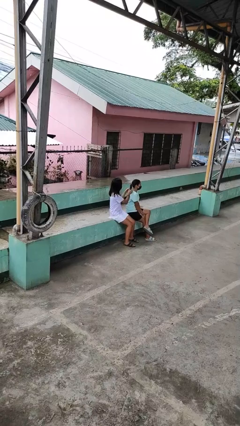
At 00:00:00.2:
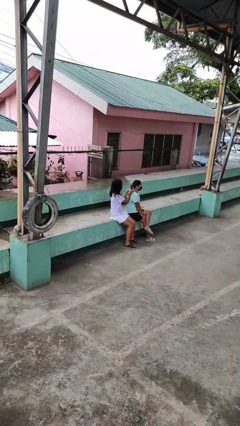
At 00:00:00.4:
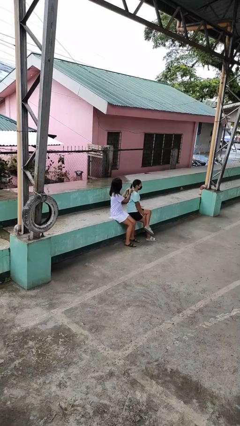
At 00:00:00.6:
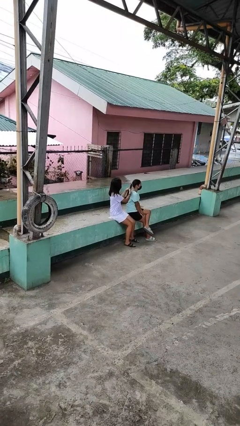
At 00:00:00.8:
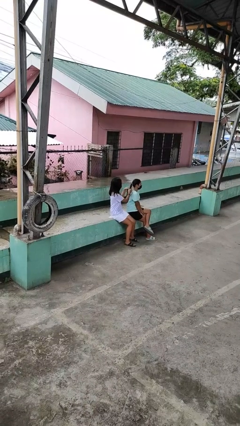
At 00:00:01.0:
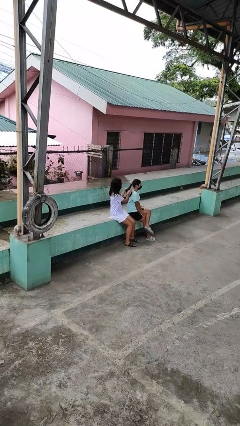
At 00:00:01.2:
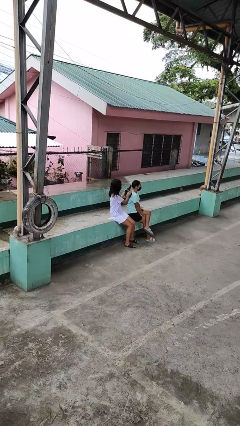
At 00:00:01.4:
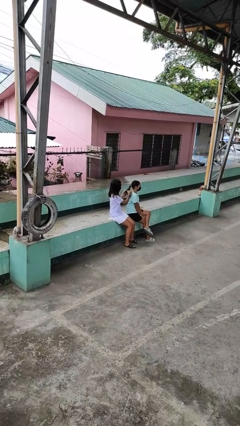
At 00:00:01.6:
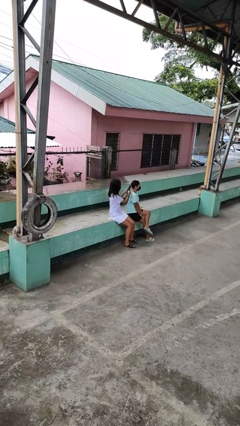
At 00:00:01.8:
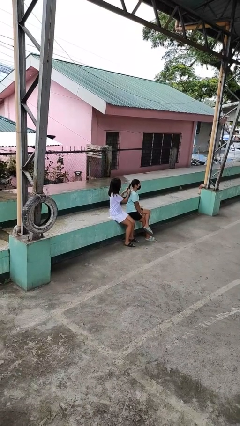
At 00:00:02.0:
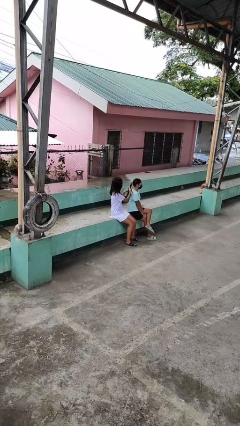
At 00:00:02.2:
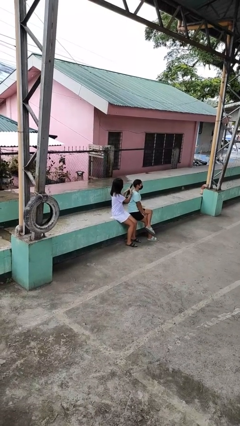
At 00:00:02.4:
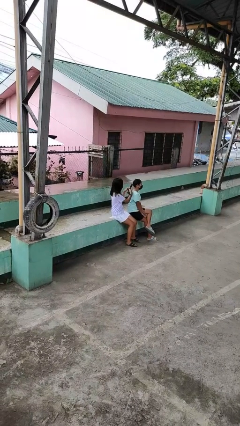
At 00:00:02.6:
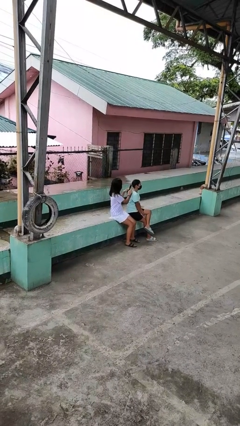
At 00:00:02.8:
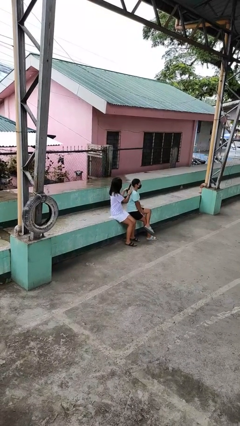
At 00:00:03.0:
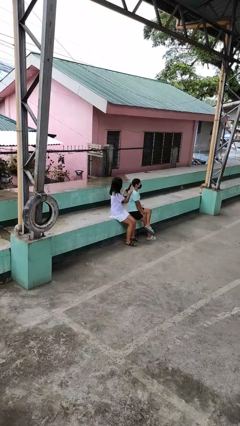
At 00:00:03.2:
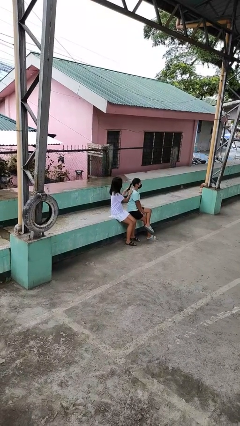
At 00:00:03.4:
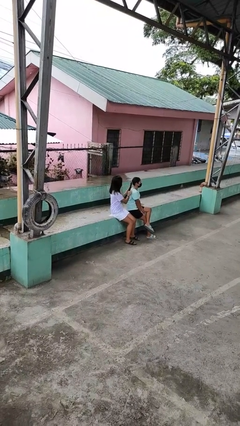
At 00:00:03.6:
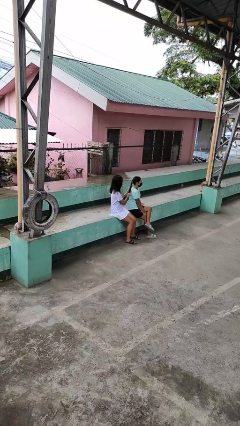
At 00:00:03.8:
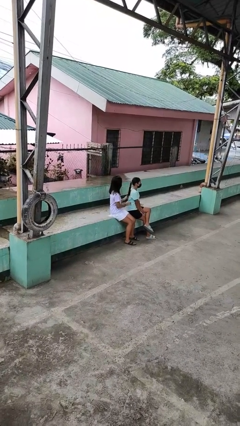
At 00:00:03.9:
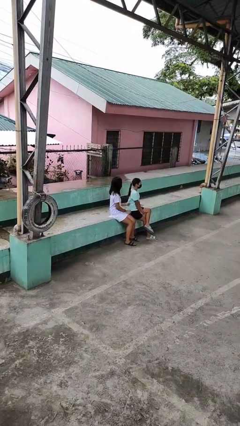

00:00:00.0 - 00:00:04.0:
person braids hair of person

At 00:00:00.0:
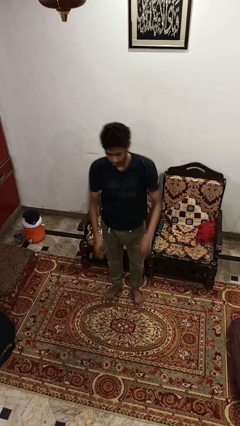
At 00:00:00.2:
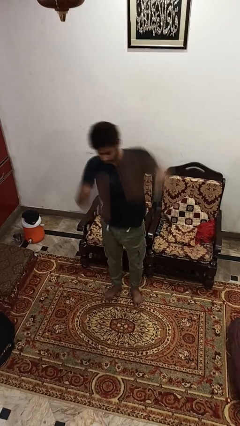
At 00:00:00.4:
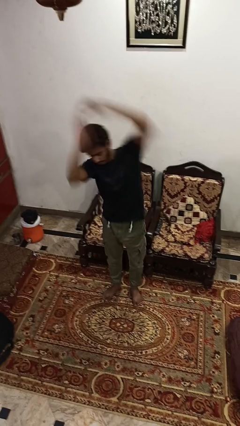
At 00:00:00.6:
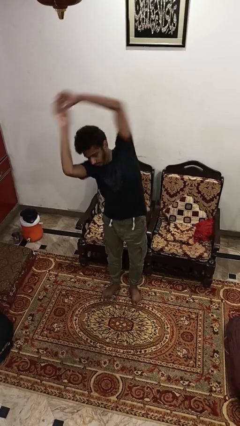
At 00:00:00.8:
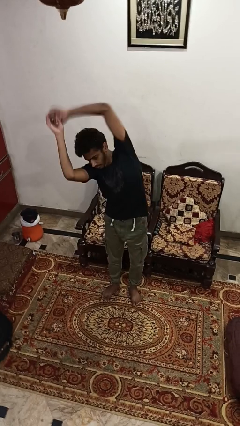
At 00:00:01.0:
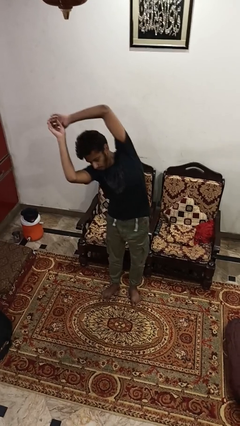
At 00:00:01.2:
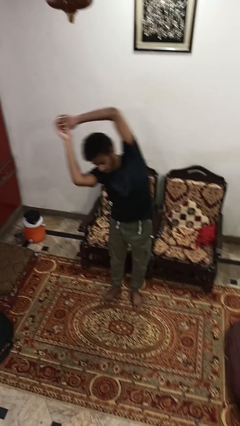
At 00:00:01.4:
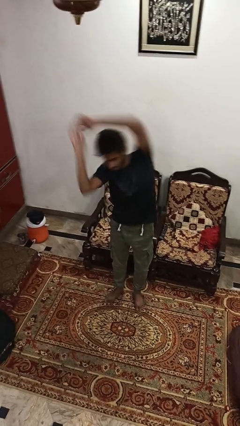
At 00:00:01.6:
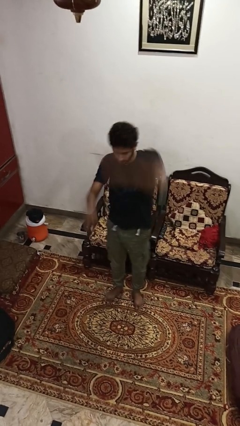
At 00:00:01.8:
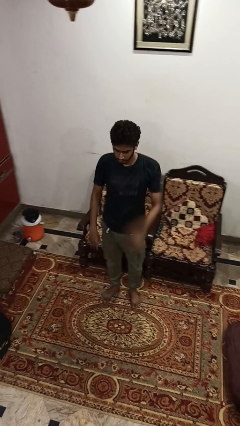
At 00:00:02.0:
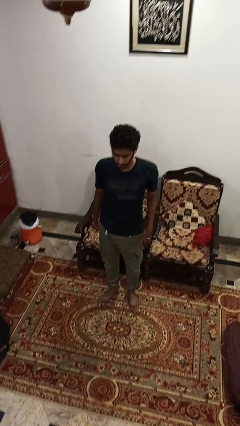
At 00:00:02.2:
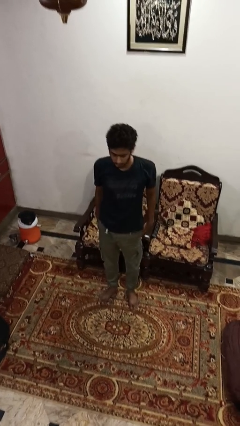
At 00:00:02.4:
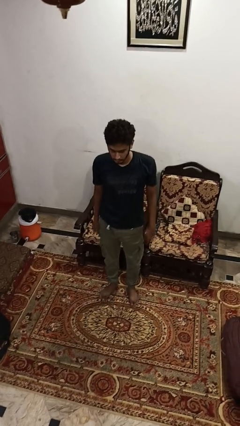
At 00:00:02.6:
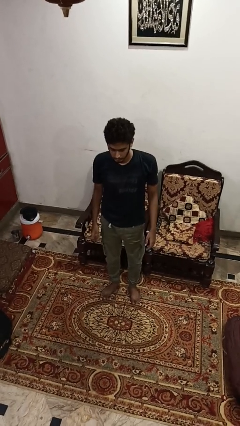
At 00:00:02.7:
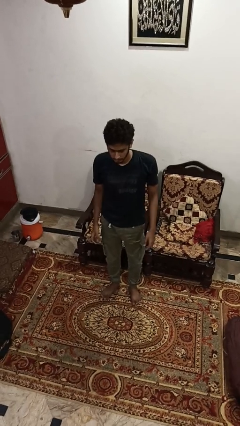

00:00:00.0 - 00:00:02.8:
person stretches arms to side

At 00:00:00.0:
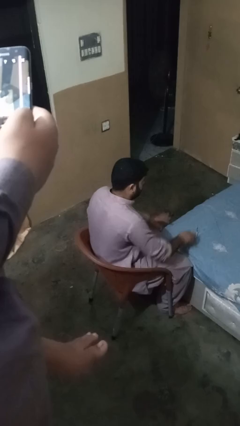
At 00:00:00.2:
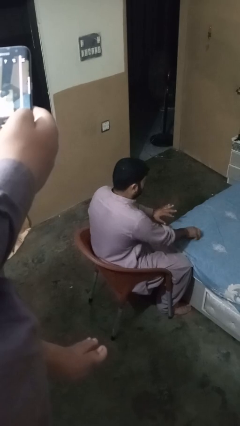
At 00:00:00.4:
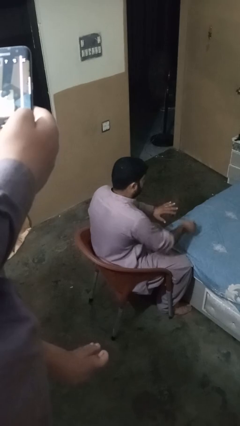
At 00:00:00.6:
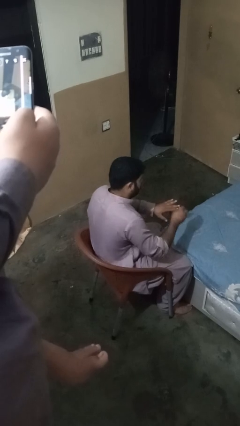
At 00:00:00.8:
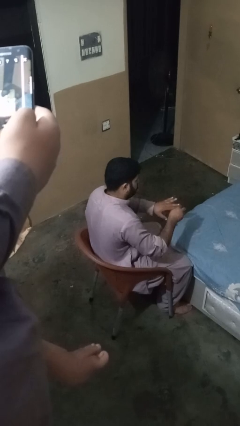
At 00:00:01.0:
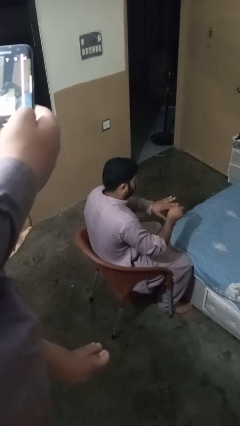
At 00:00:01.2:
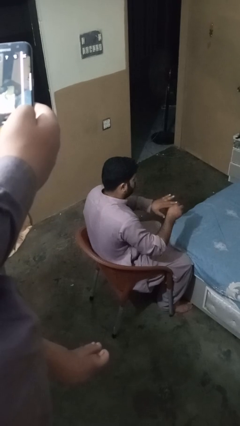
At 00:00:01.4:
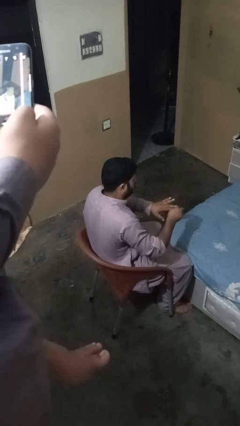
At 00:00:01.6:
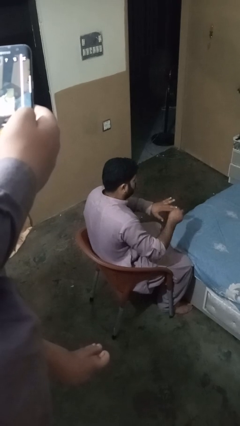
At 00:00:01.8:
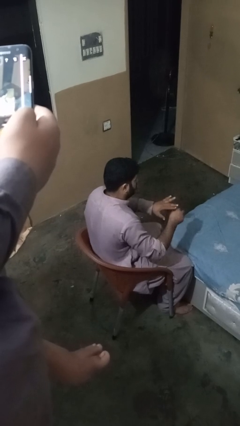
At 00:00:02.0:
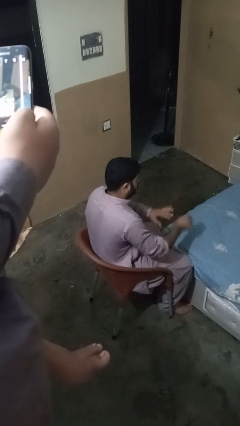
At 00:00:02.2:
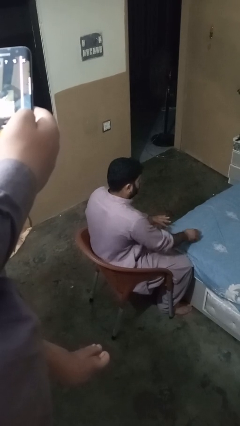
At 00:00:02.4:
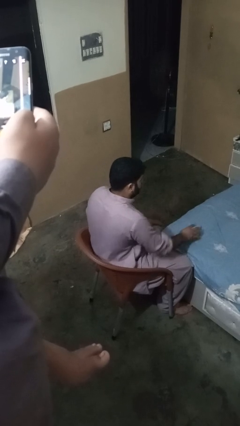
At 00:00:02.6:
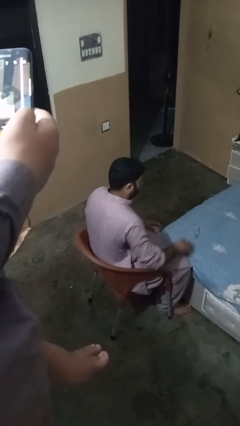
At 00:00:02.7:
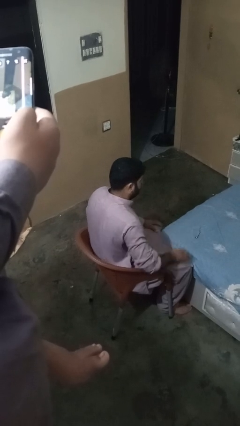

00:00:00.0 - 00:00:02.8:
person files fingernails

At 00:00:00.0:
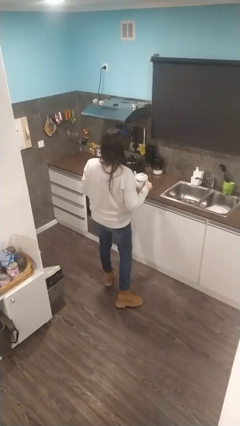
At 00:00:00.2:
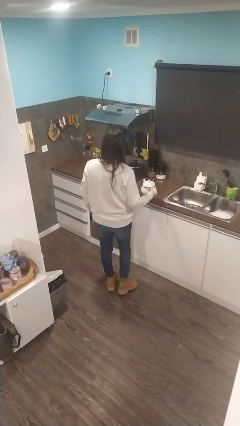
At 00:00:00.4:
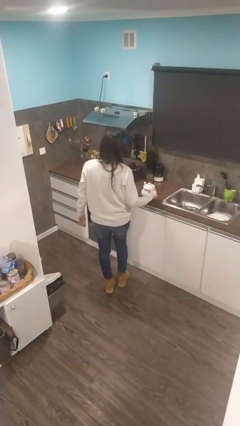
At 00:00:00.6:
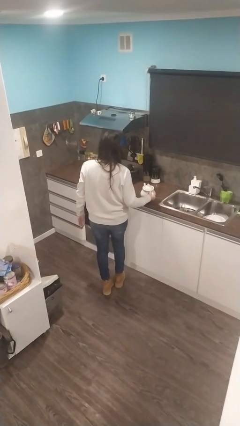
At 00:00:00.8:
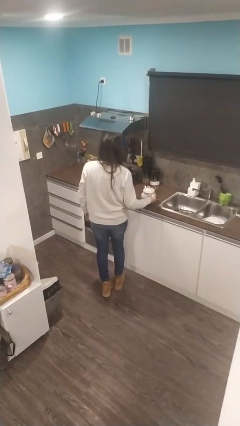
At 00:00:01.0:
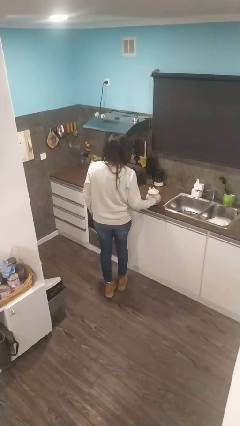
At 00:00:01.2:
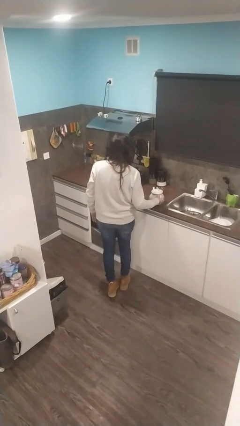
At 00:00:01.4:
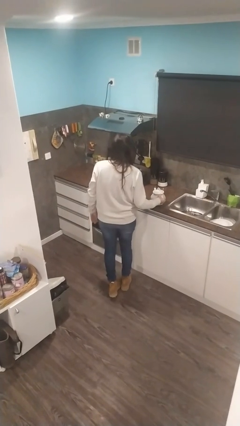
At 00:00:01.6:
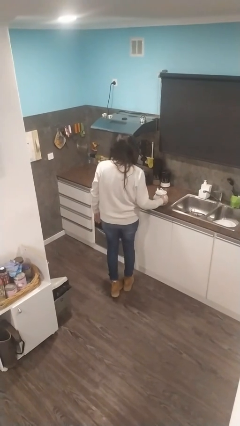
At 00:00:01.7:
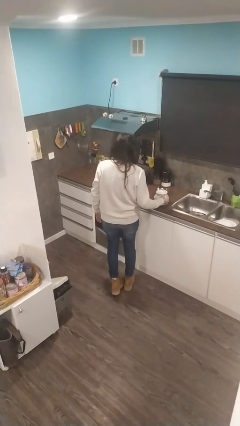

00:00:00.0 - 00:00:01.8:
person puts down object on countertop

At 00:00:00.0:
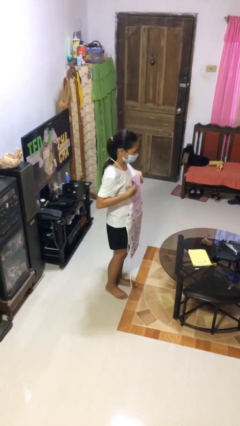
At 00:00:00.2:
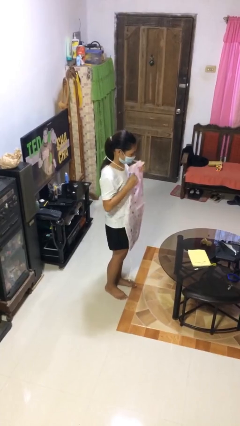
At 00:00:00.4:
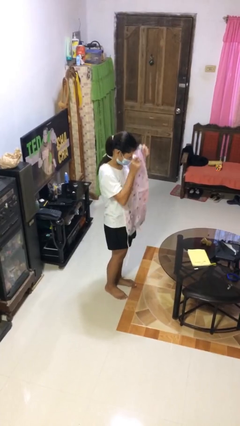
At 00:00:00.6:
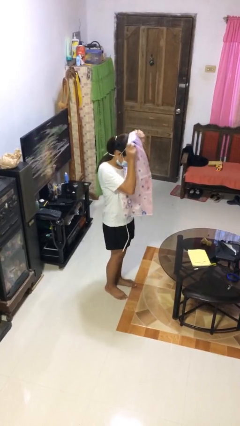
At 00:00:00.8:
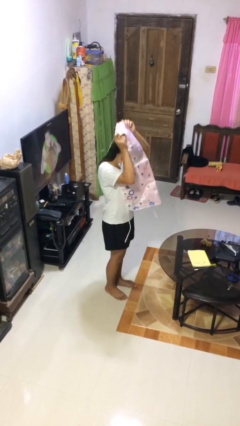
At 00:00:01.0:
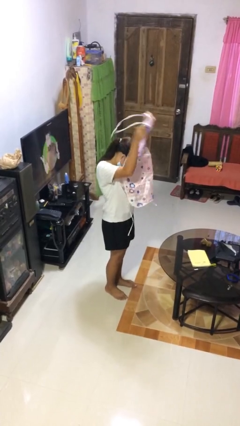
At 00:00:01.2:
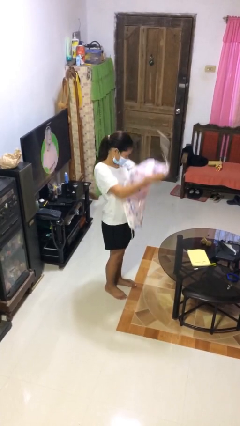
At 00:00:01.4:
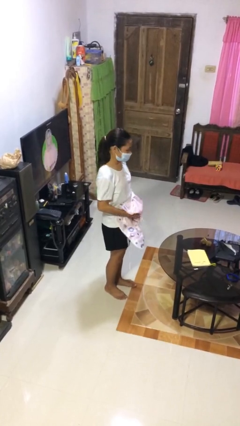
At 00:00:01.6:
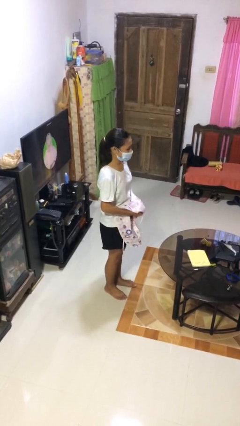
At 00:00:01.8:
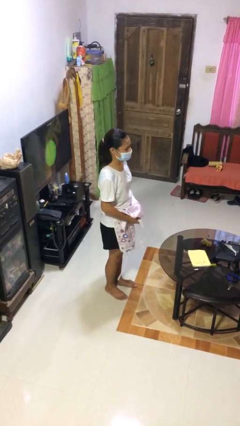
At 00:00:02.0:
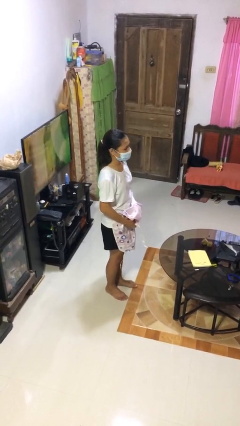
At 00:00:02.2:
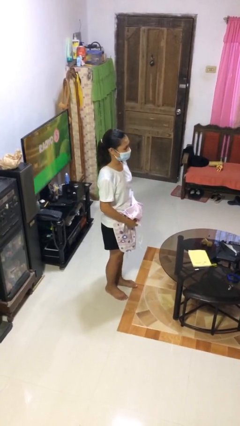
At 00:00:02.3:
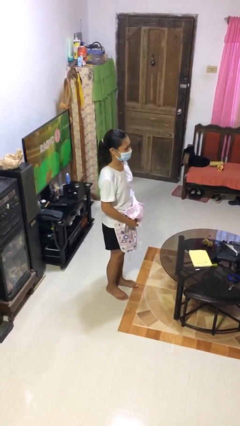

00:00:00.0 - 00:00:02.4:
person takes off apron

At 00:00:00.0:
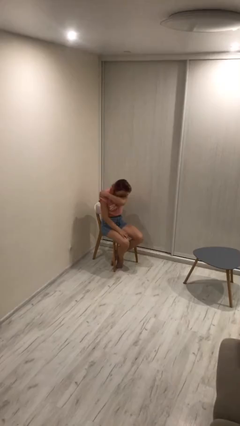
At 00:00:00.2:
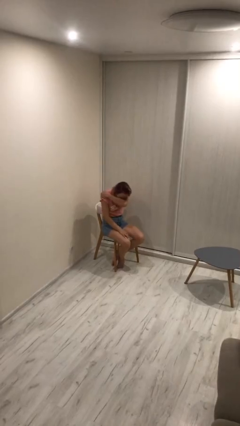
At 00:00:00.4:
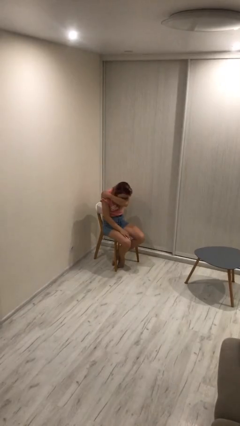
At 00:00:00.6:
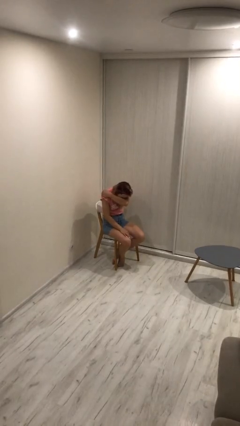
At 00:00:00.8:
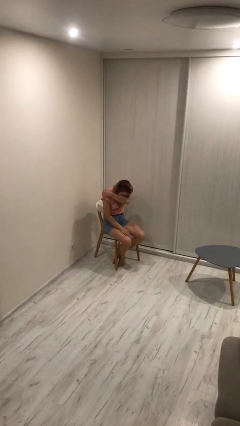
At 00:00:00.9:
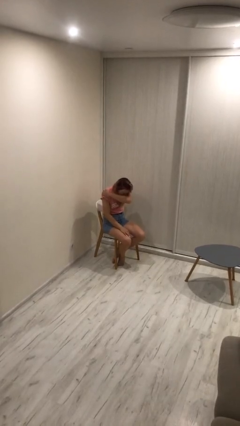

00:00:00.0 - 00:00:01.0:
person sneezes into arm

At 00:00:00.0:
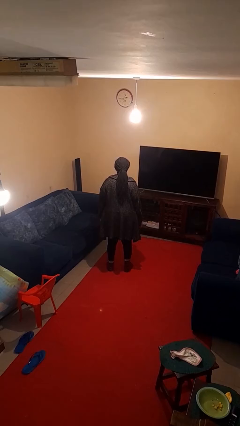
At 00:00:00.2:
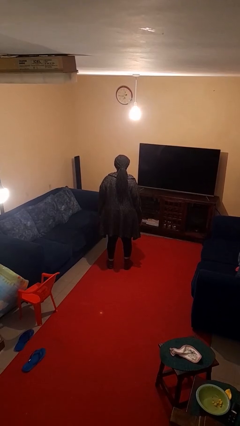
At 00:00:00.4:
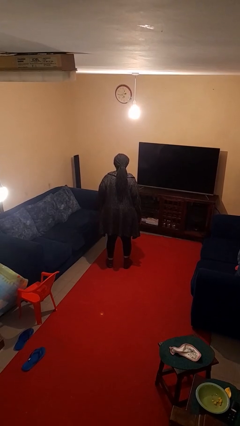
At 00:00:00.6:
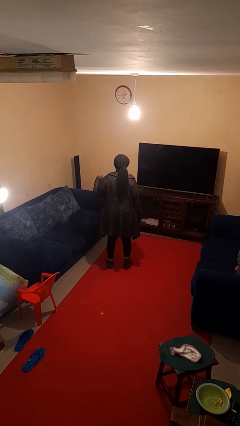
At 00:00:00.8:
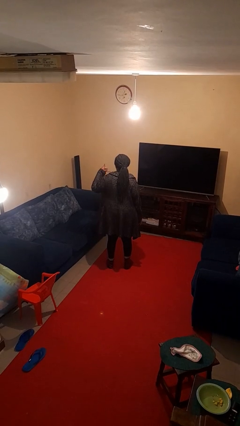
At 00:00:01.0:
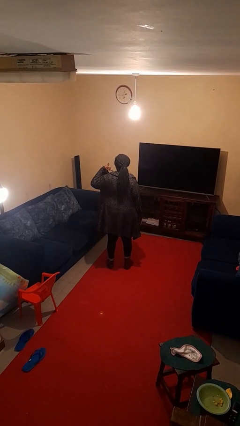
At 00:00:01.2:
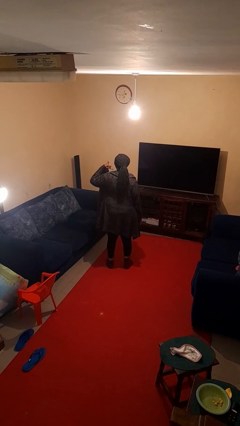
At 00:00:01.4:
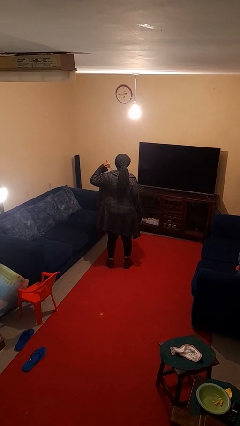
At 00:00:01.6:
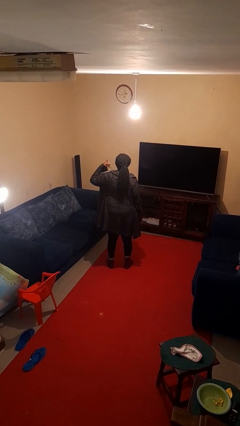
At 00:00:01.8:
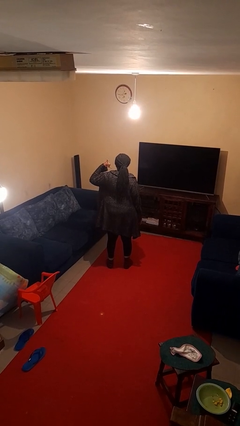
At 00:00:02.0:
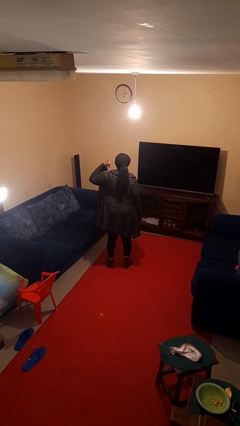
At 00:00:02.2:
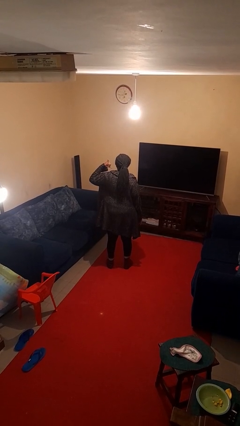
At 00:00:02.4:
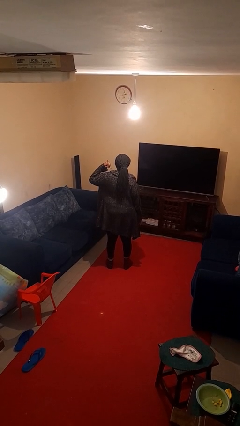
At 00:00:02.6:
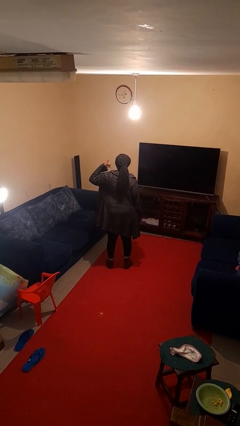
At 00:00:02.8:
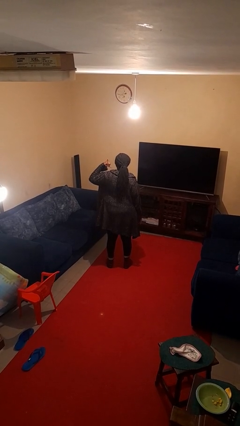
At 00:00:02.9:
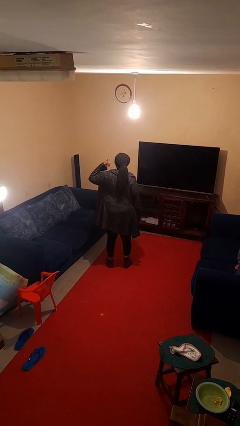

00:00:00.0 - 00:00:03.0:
person gestures call me
